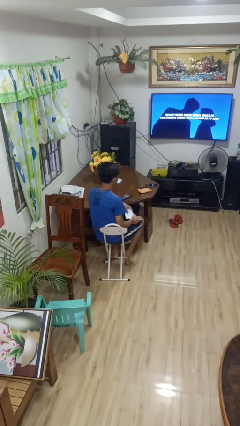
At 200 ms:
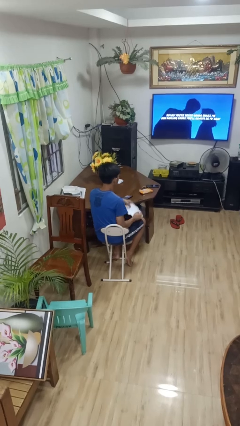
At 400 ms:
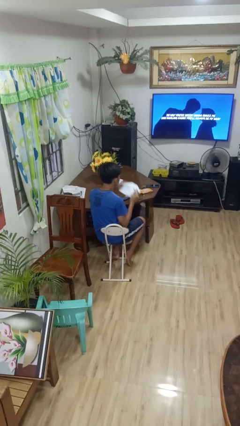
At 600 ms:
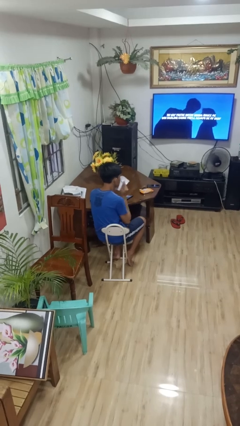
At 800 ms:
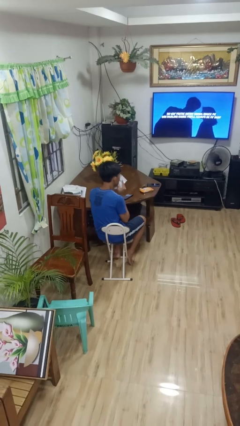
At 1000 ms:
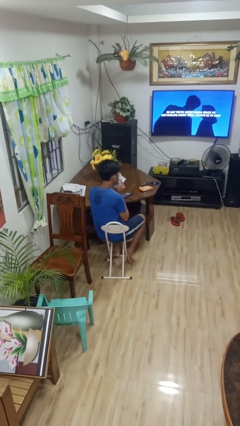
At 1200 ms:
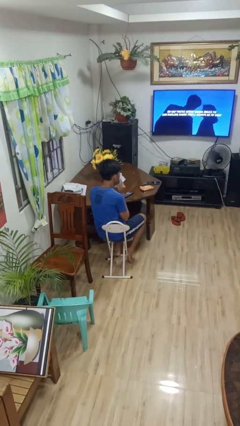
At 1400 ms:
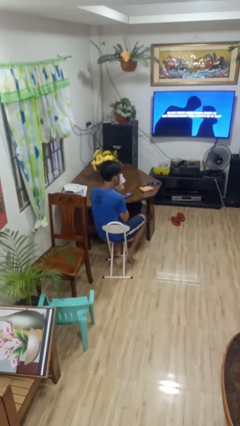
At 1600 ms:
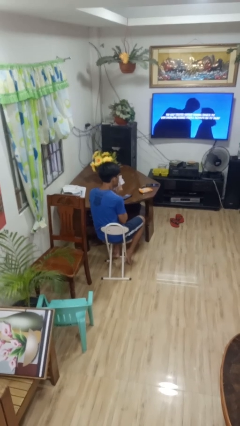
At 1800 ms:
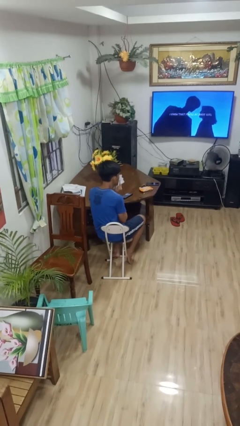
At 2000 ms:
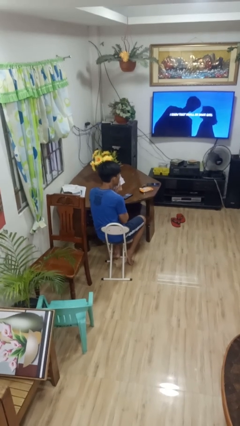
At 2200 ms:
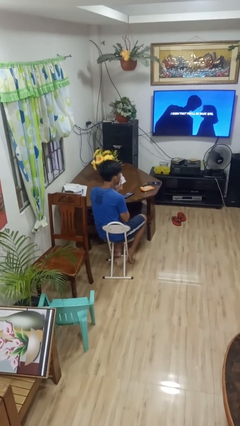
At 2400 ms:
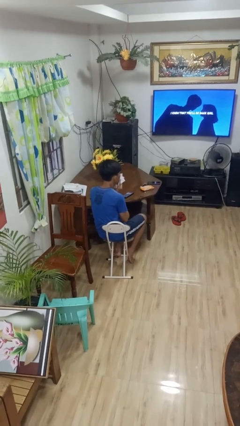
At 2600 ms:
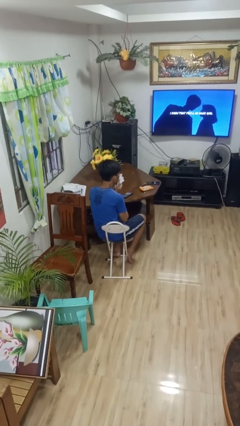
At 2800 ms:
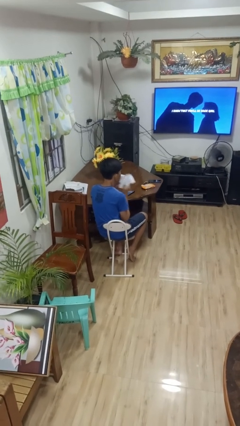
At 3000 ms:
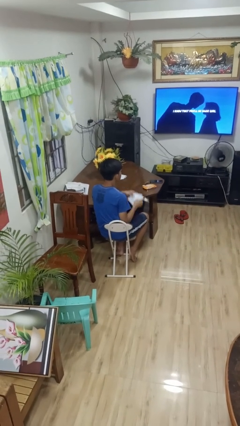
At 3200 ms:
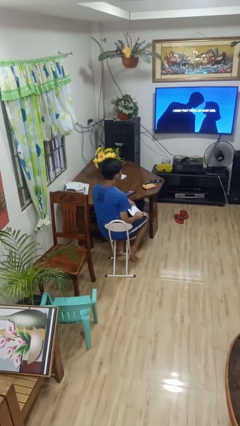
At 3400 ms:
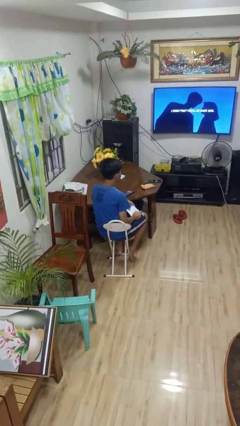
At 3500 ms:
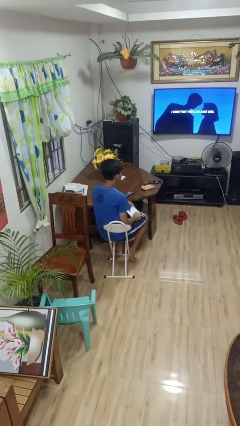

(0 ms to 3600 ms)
person wipes mouth with napkin

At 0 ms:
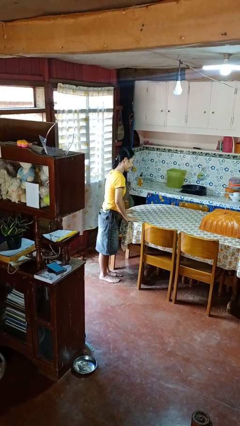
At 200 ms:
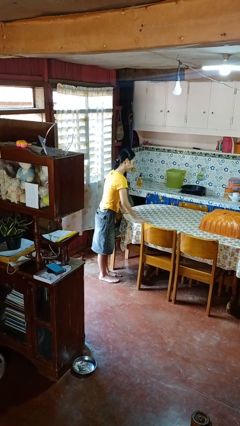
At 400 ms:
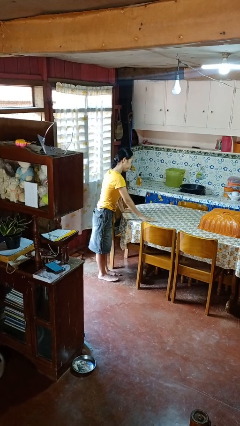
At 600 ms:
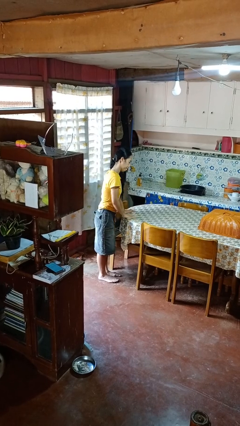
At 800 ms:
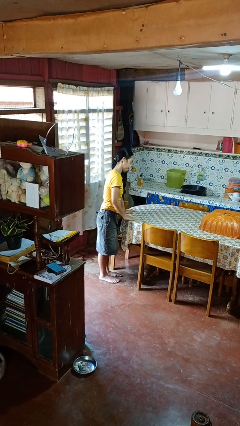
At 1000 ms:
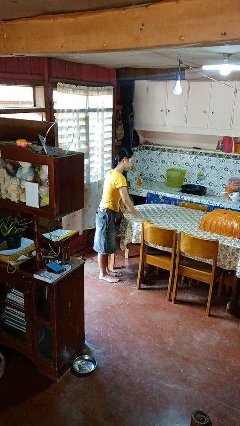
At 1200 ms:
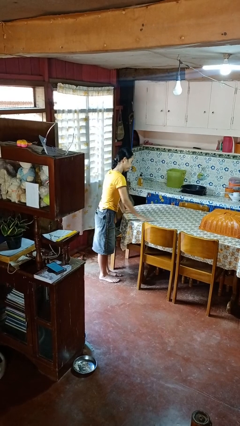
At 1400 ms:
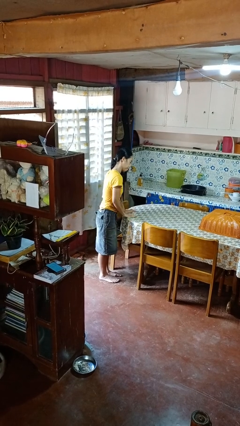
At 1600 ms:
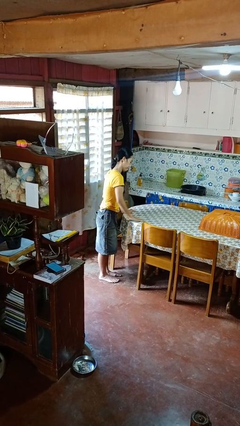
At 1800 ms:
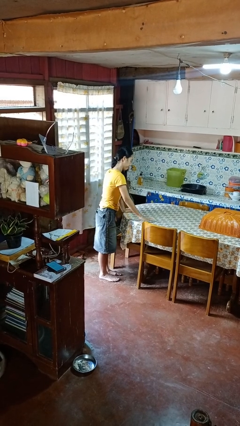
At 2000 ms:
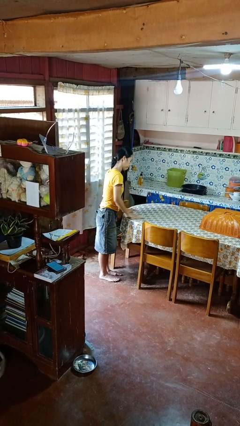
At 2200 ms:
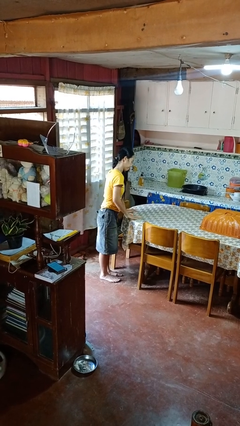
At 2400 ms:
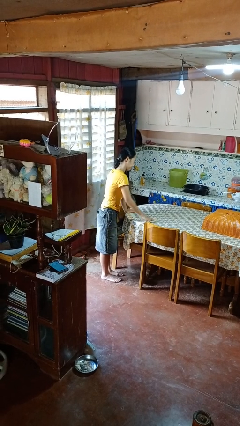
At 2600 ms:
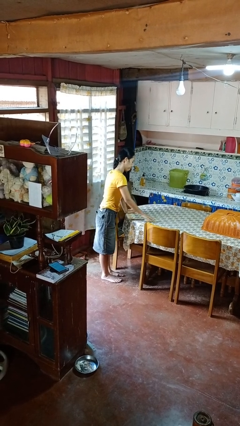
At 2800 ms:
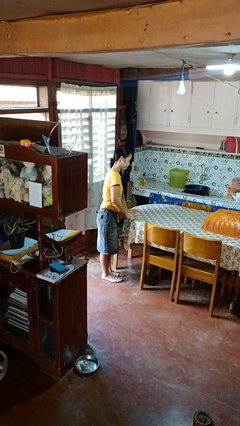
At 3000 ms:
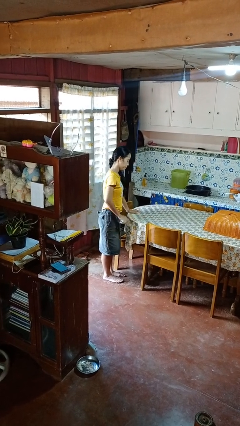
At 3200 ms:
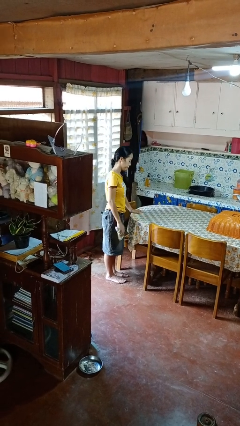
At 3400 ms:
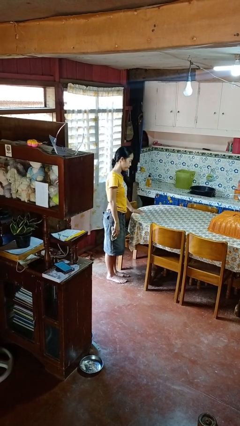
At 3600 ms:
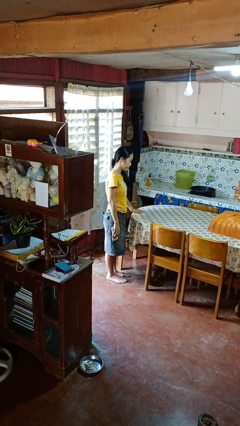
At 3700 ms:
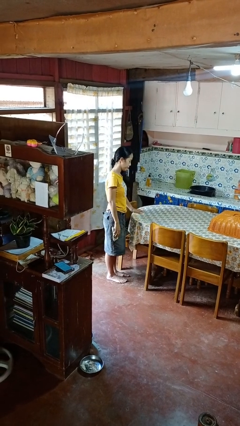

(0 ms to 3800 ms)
person cleans table with rag

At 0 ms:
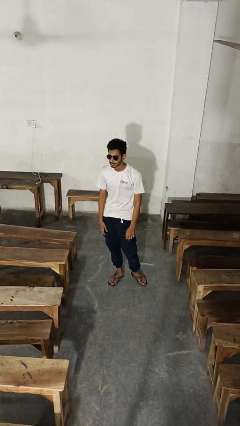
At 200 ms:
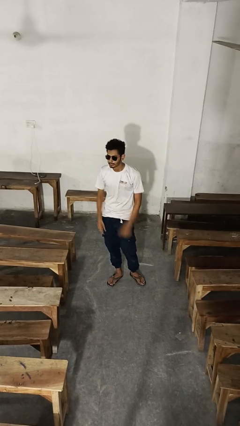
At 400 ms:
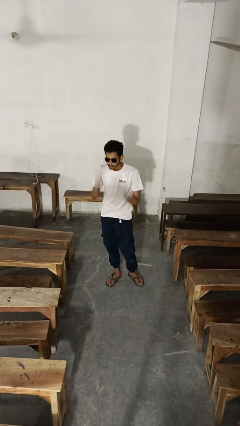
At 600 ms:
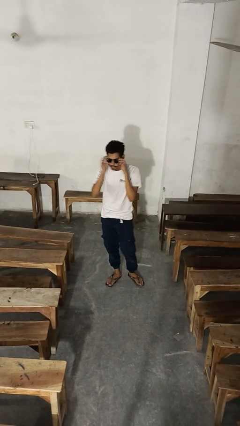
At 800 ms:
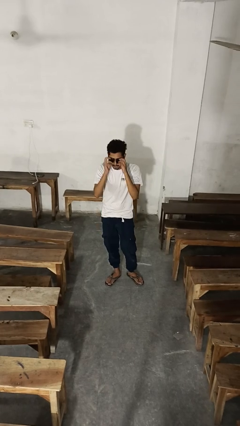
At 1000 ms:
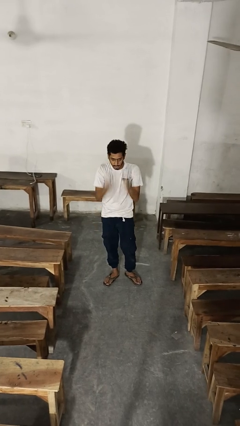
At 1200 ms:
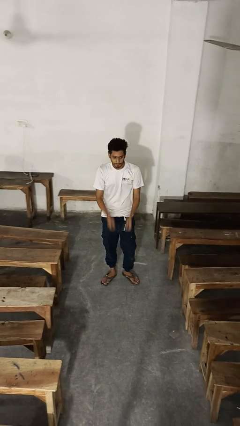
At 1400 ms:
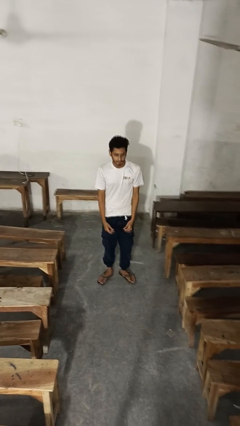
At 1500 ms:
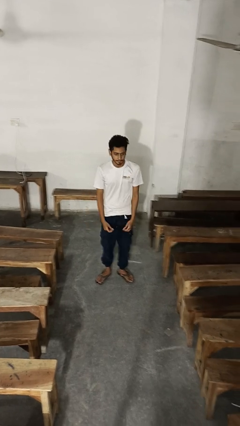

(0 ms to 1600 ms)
person takes off sunglasses

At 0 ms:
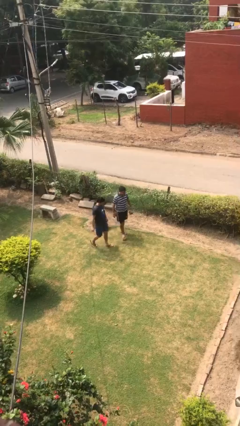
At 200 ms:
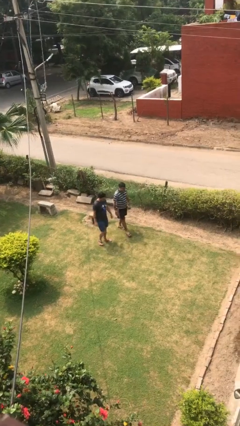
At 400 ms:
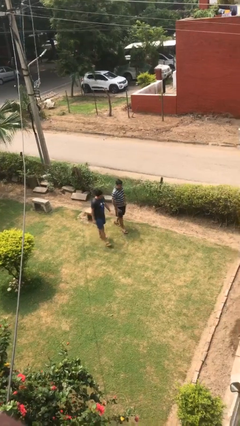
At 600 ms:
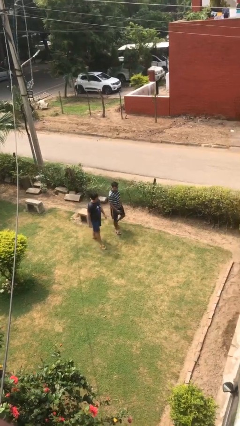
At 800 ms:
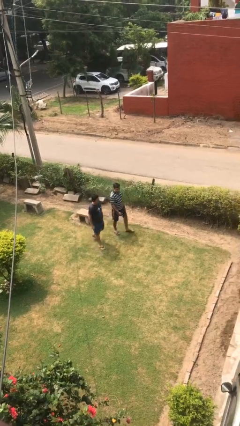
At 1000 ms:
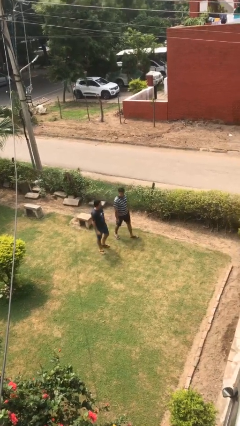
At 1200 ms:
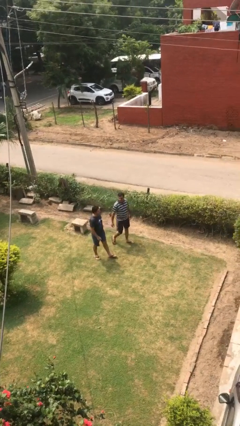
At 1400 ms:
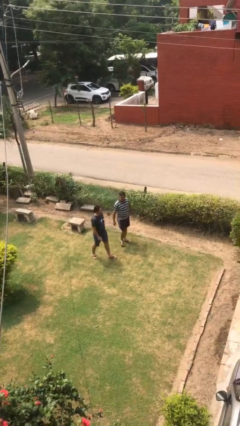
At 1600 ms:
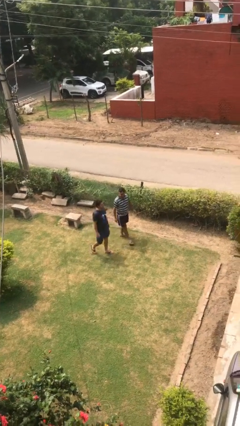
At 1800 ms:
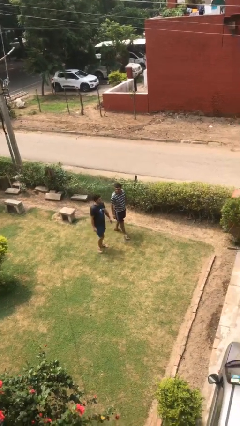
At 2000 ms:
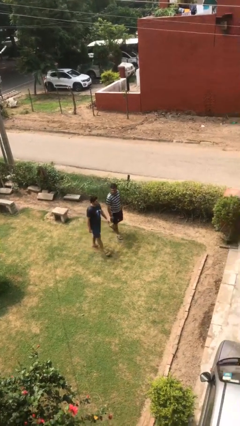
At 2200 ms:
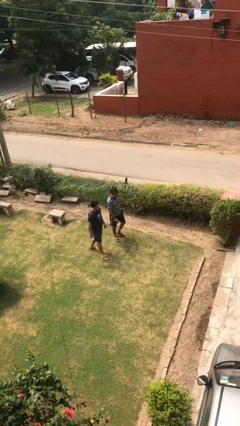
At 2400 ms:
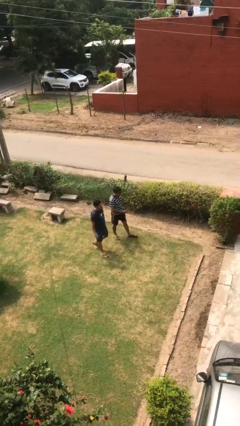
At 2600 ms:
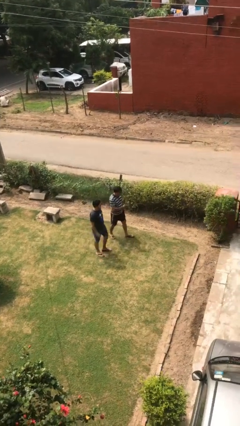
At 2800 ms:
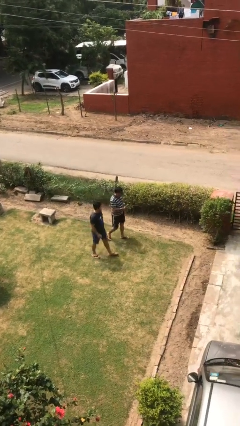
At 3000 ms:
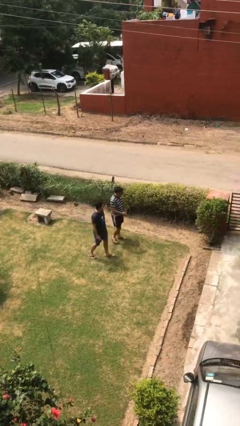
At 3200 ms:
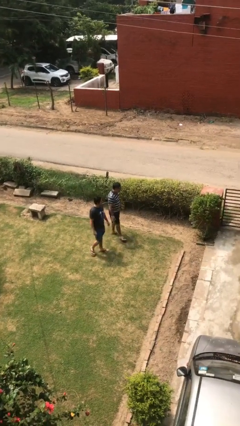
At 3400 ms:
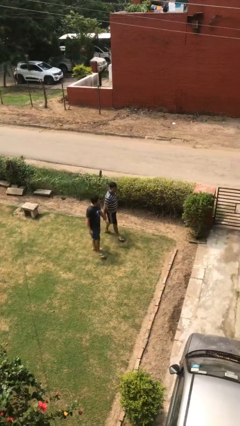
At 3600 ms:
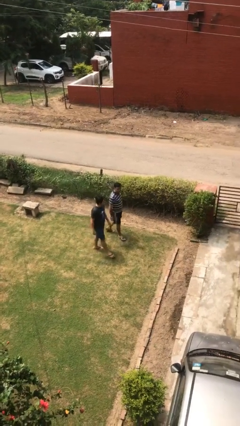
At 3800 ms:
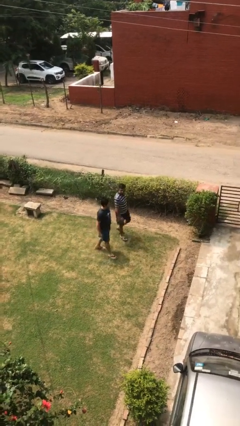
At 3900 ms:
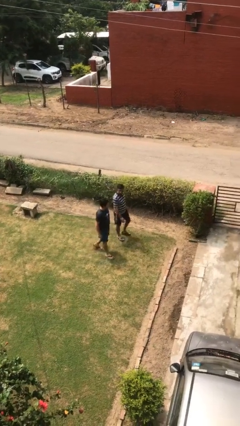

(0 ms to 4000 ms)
person talks to person

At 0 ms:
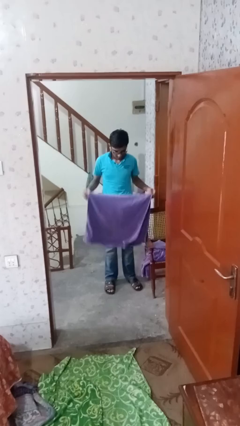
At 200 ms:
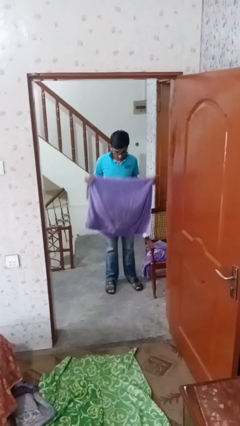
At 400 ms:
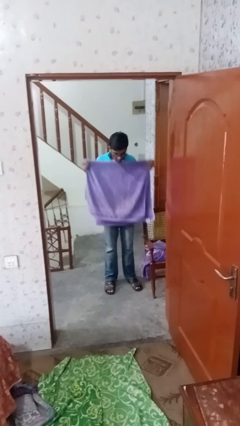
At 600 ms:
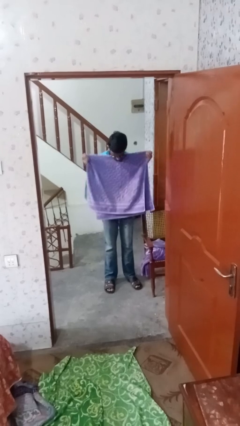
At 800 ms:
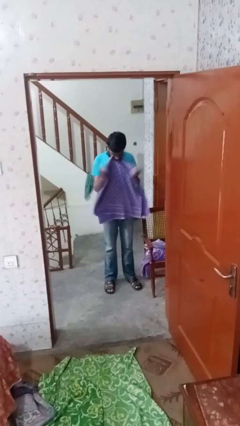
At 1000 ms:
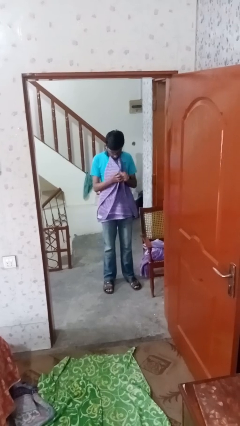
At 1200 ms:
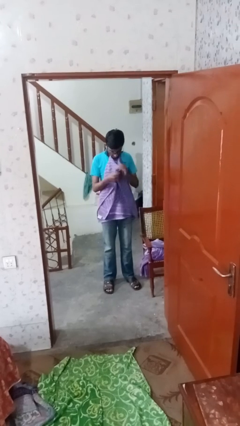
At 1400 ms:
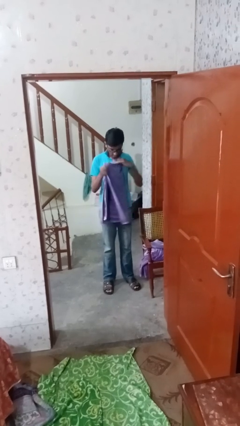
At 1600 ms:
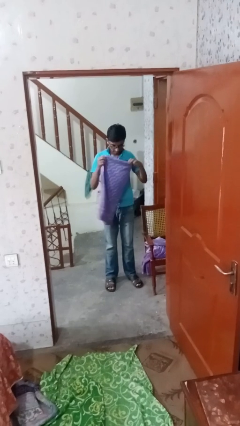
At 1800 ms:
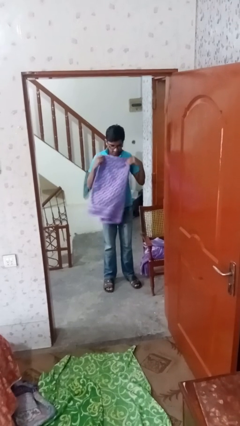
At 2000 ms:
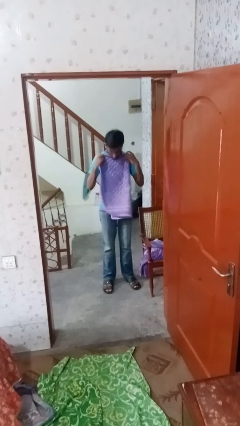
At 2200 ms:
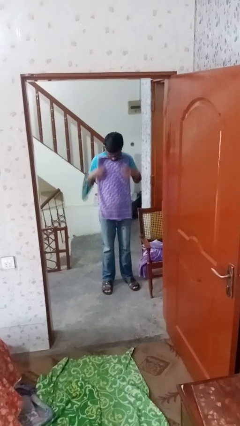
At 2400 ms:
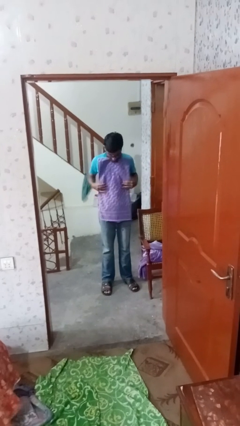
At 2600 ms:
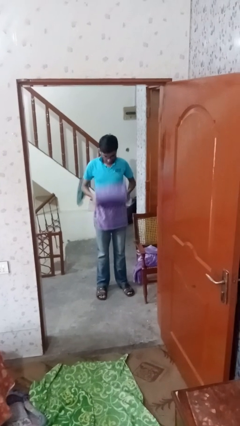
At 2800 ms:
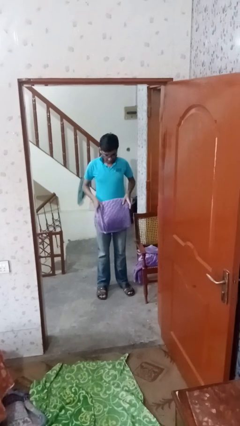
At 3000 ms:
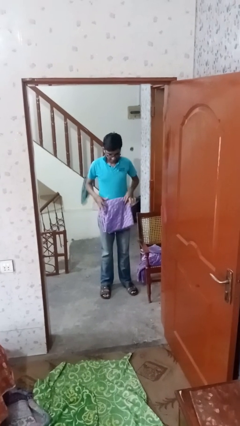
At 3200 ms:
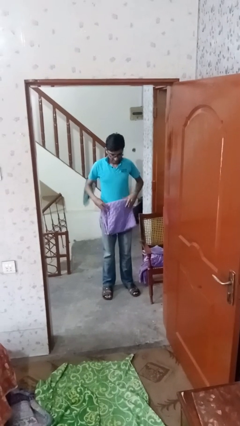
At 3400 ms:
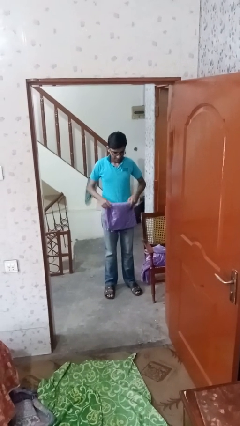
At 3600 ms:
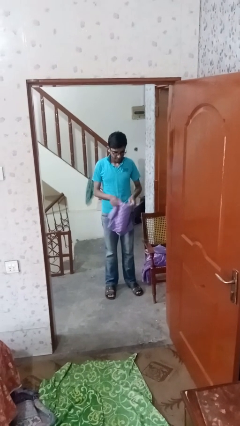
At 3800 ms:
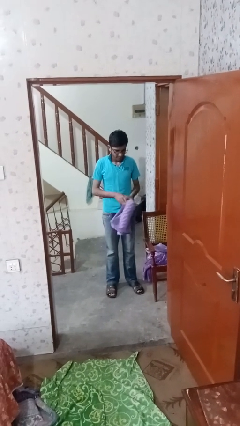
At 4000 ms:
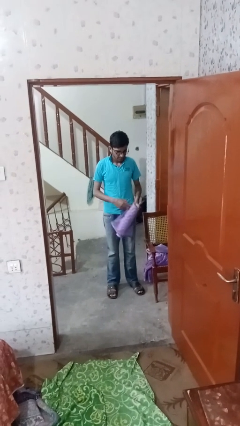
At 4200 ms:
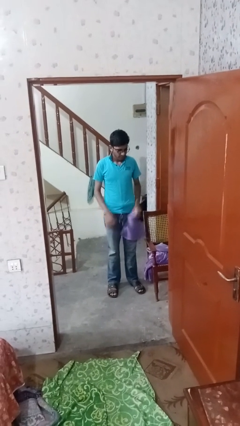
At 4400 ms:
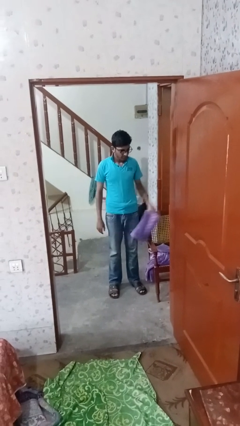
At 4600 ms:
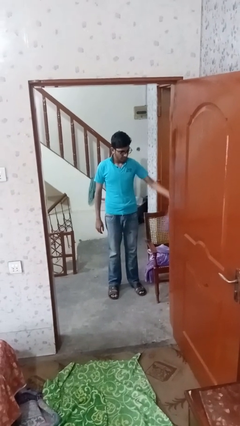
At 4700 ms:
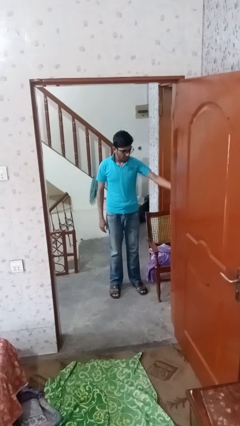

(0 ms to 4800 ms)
person folds towel
